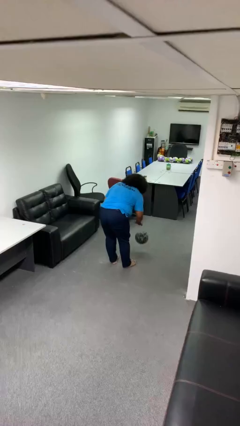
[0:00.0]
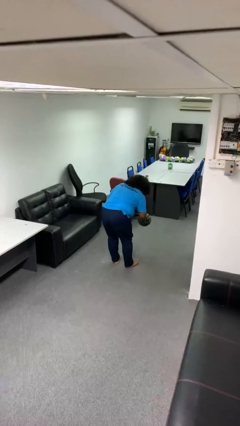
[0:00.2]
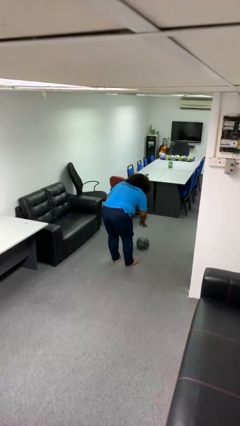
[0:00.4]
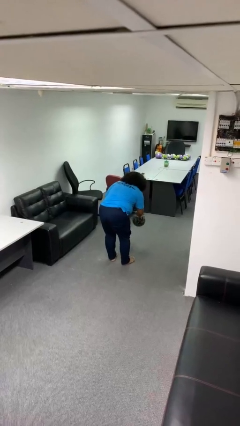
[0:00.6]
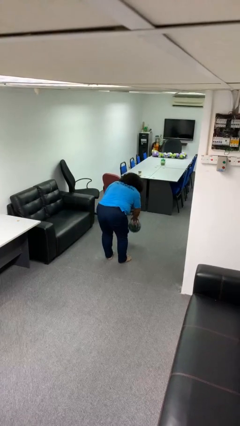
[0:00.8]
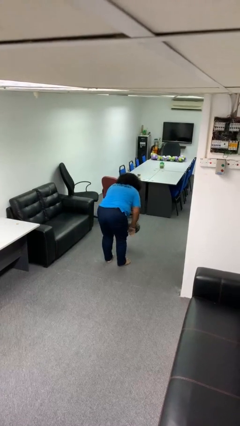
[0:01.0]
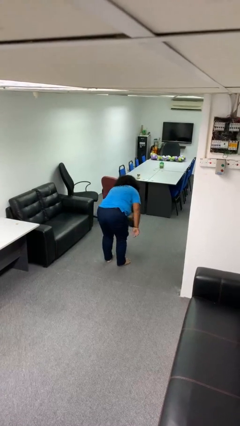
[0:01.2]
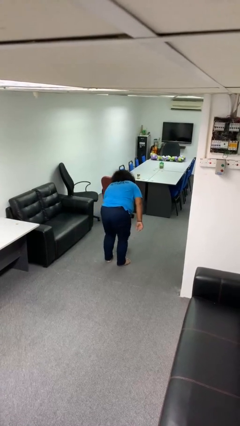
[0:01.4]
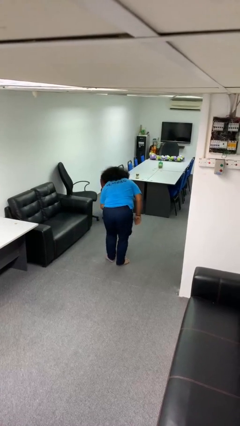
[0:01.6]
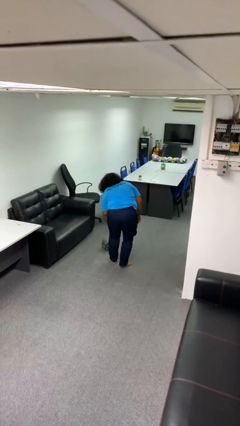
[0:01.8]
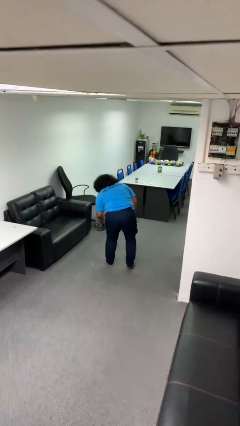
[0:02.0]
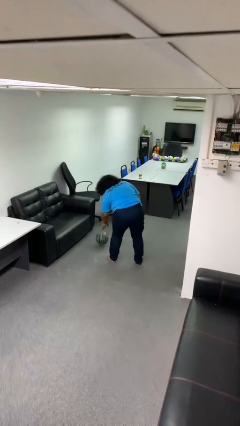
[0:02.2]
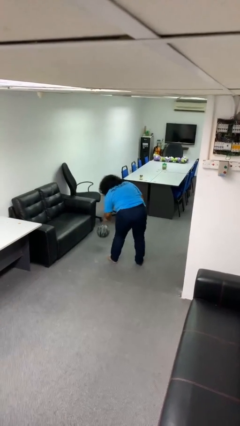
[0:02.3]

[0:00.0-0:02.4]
person bounces ball on floor

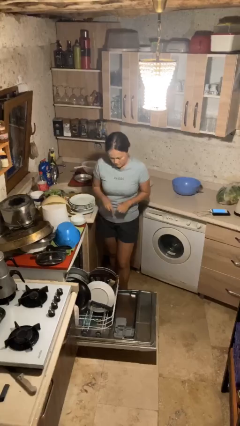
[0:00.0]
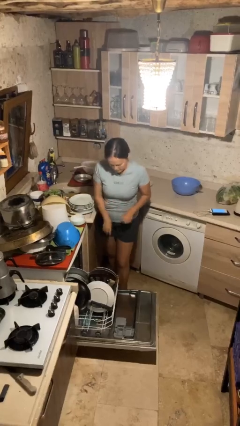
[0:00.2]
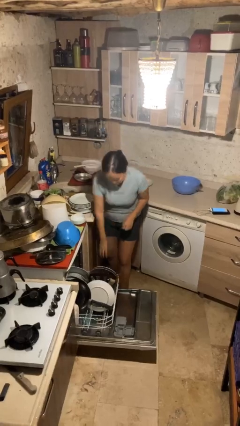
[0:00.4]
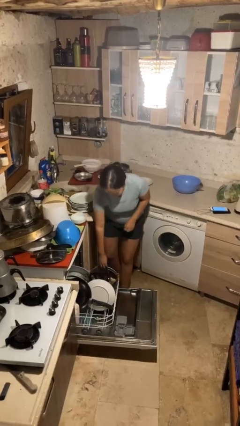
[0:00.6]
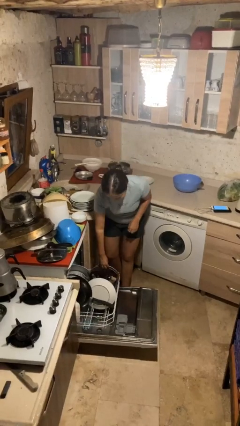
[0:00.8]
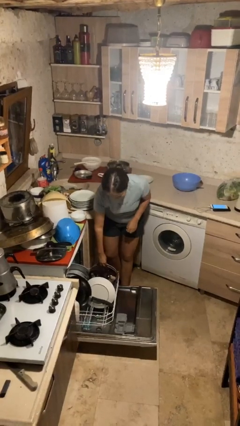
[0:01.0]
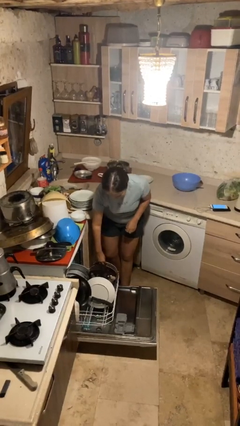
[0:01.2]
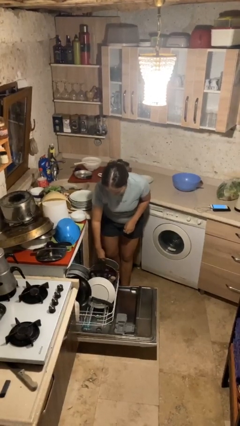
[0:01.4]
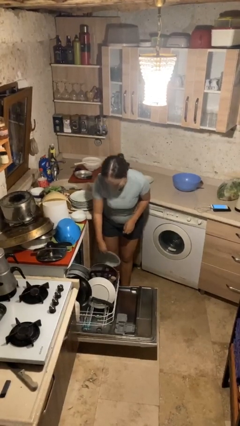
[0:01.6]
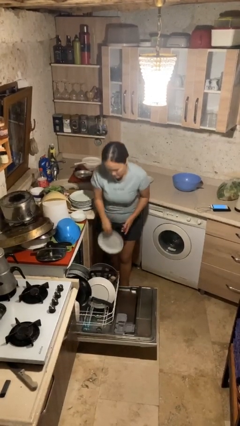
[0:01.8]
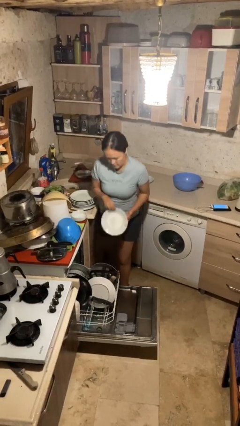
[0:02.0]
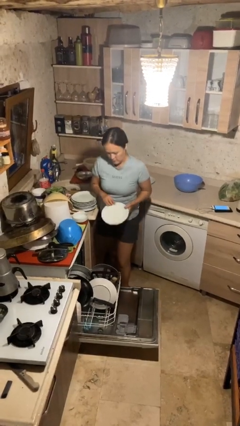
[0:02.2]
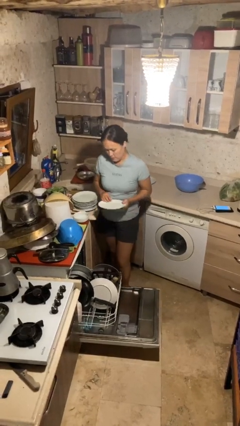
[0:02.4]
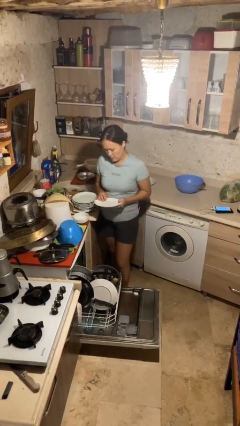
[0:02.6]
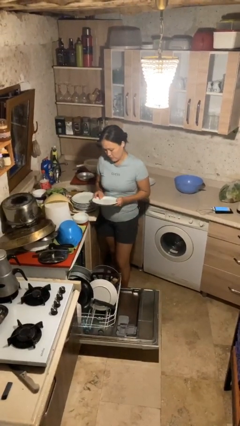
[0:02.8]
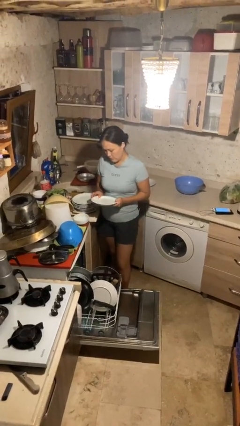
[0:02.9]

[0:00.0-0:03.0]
person unloads dishwasher

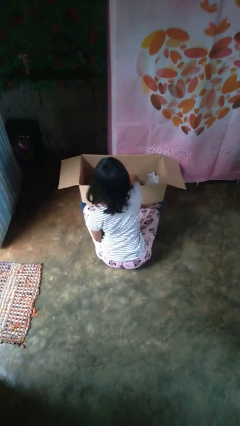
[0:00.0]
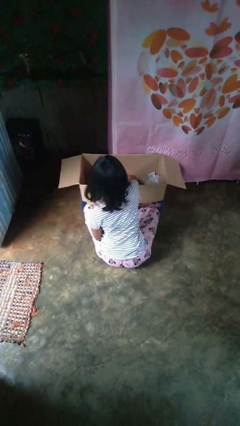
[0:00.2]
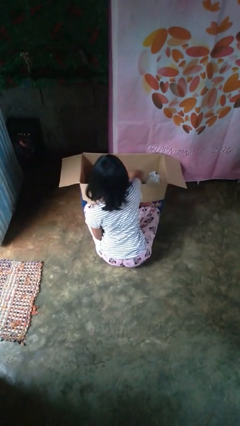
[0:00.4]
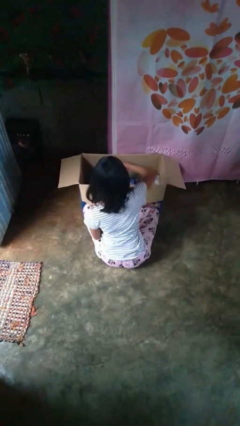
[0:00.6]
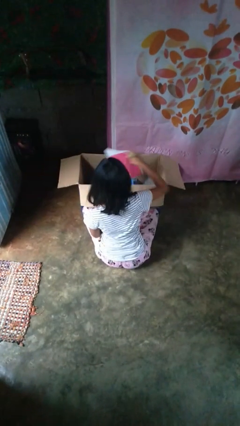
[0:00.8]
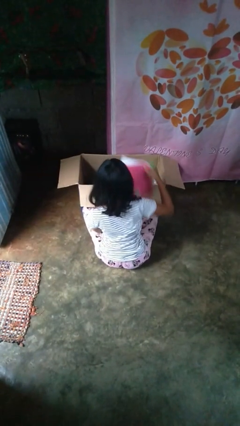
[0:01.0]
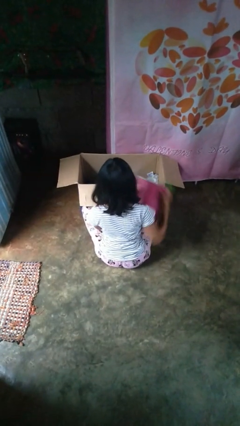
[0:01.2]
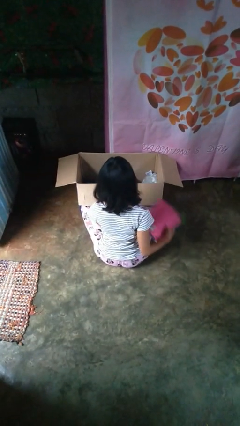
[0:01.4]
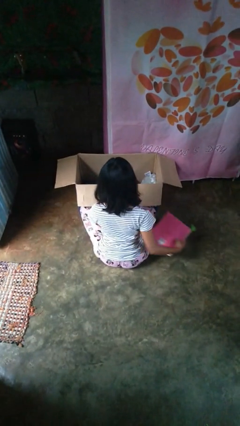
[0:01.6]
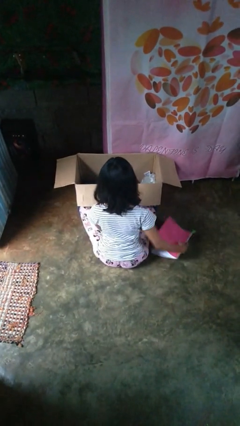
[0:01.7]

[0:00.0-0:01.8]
person takes object from box

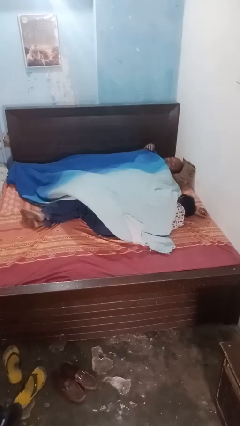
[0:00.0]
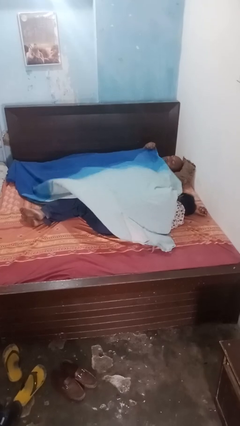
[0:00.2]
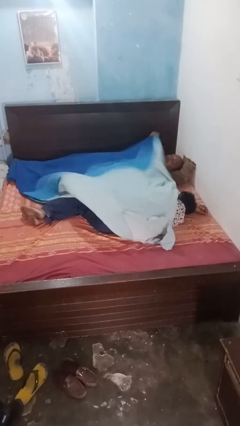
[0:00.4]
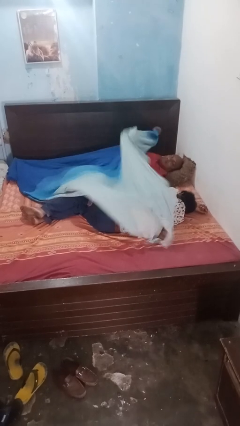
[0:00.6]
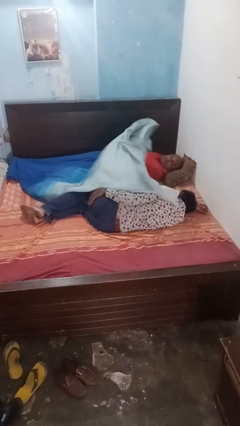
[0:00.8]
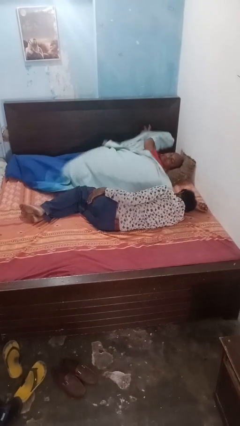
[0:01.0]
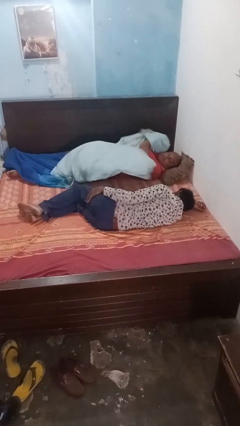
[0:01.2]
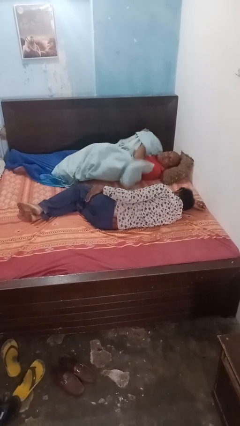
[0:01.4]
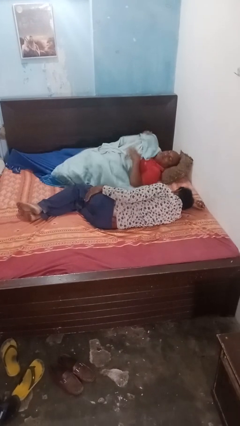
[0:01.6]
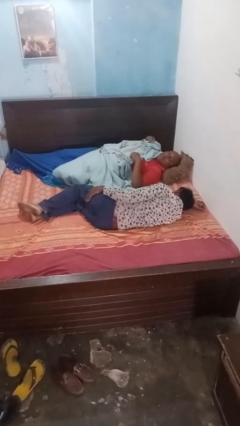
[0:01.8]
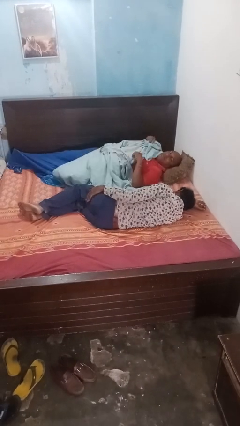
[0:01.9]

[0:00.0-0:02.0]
person uncovers friend with blanket

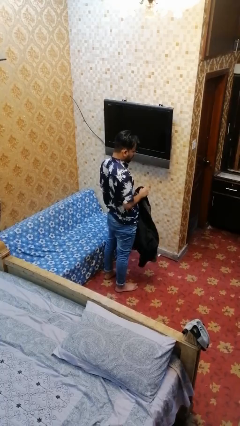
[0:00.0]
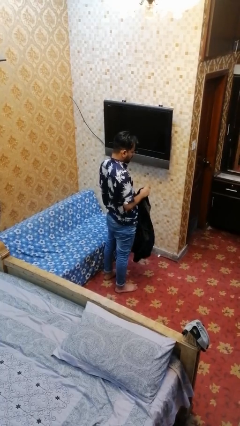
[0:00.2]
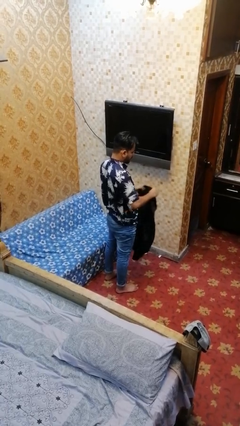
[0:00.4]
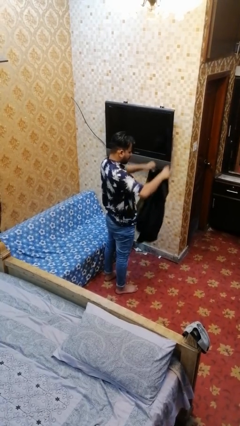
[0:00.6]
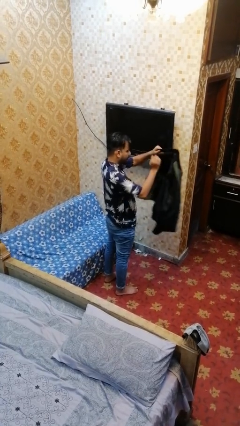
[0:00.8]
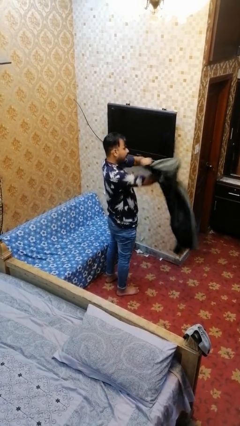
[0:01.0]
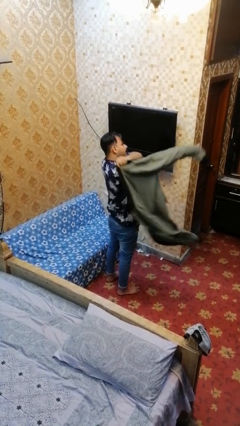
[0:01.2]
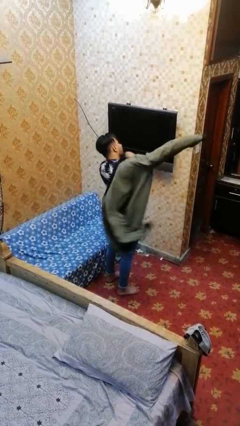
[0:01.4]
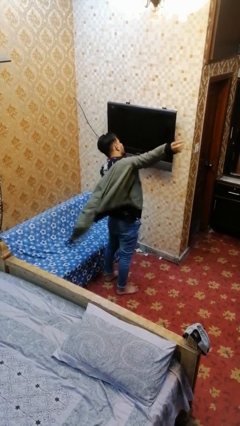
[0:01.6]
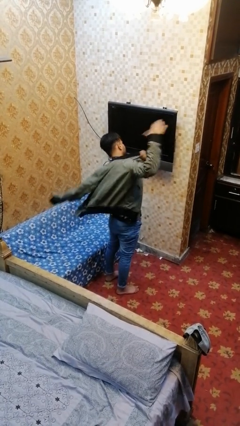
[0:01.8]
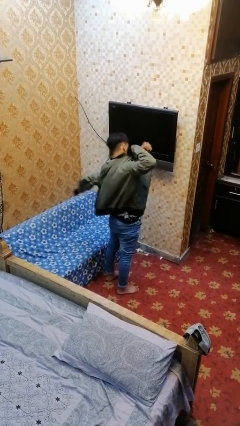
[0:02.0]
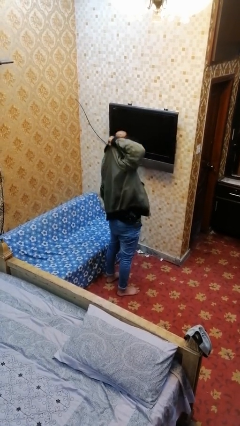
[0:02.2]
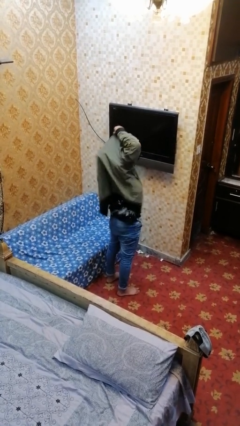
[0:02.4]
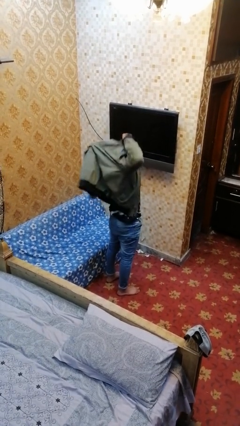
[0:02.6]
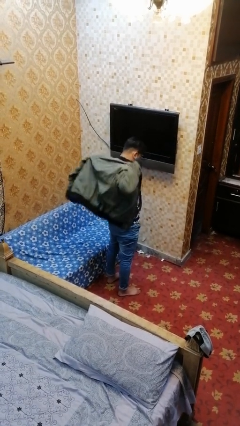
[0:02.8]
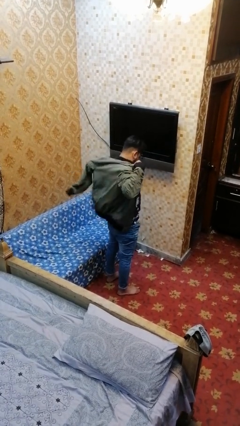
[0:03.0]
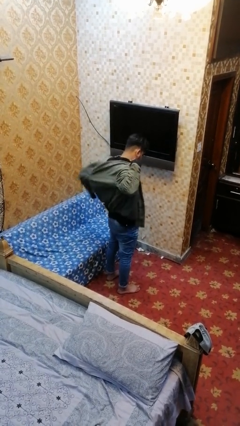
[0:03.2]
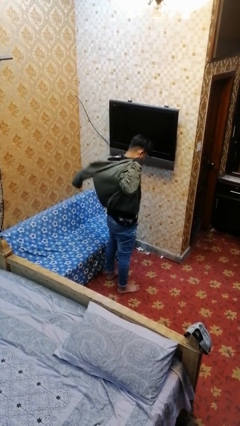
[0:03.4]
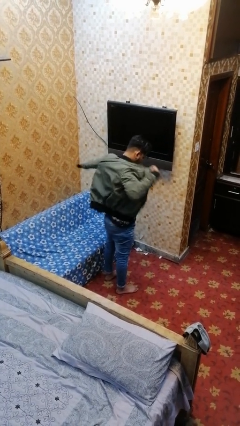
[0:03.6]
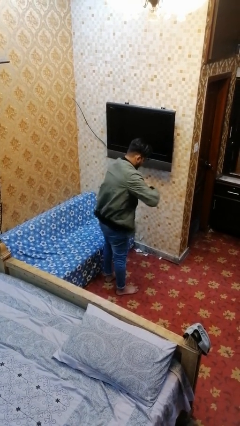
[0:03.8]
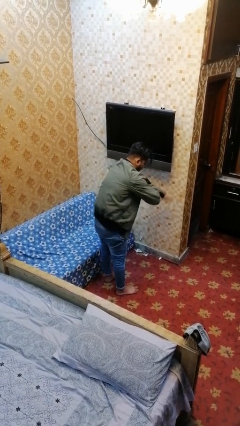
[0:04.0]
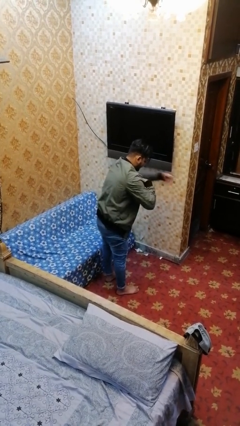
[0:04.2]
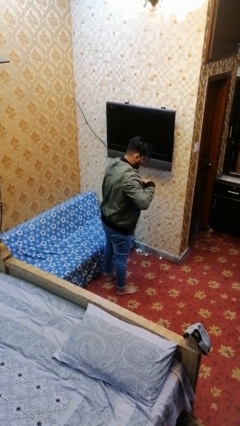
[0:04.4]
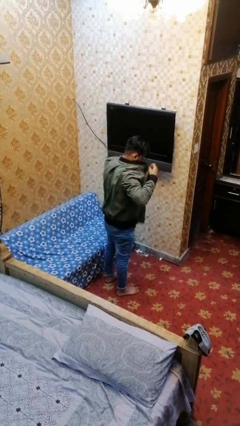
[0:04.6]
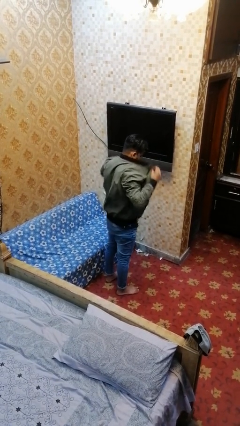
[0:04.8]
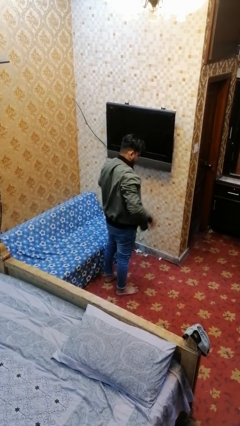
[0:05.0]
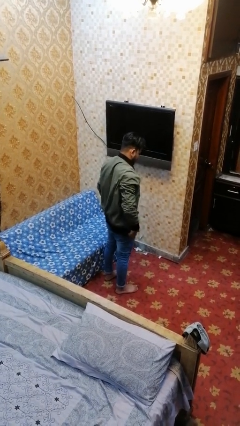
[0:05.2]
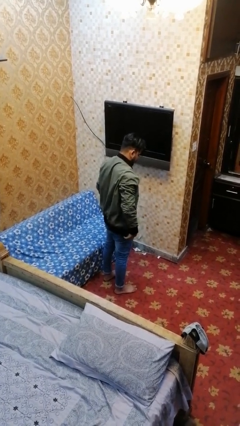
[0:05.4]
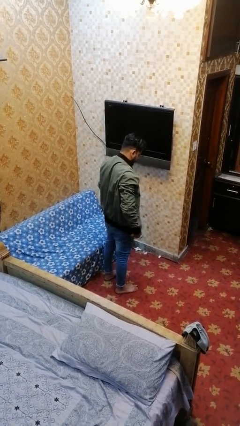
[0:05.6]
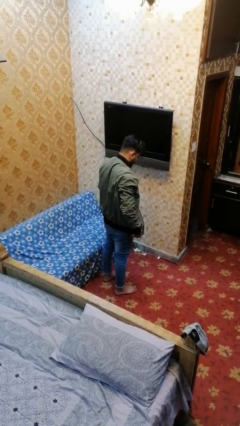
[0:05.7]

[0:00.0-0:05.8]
person puts on jacket

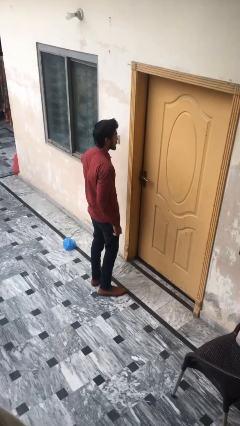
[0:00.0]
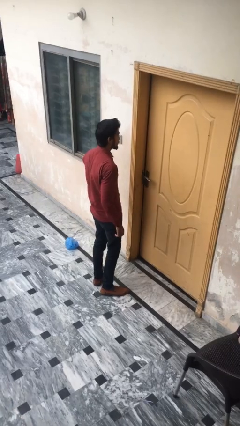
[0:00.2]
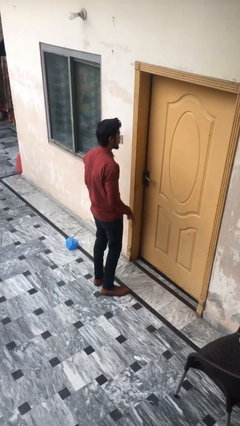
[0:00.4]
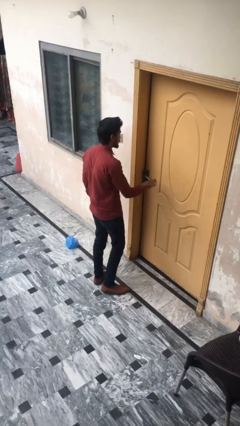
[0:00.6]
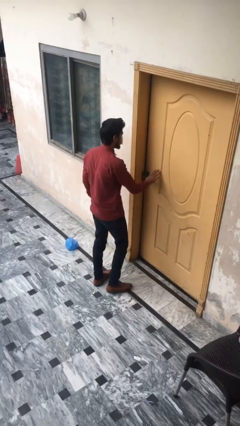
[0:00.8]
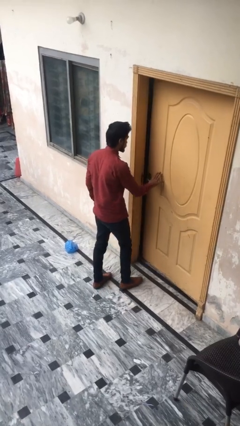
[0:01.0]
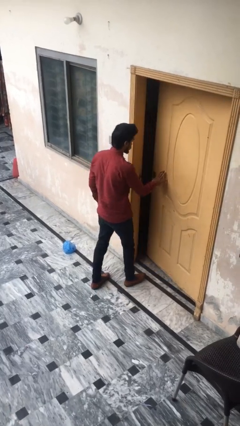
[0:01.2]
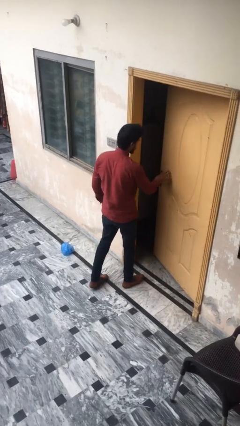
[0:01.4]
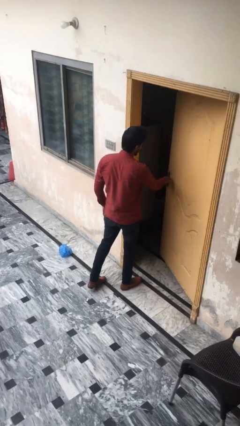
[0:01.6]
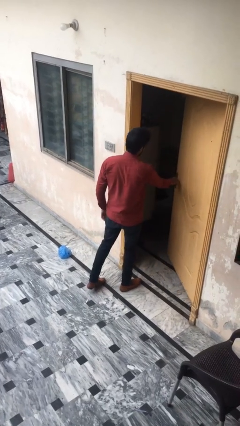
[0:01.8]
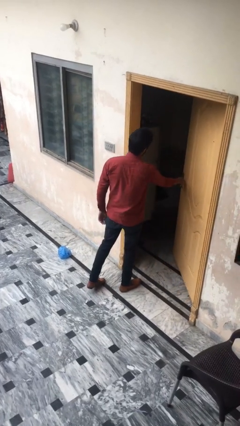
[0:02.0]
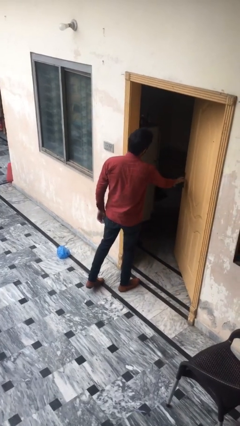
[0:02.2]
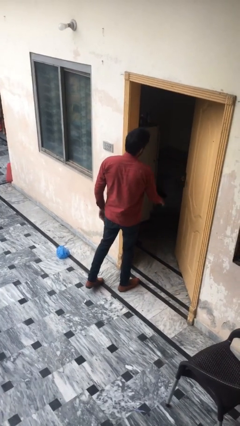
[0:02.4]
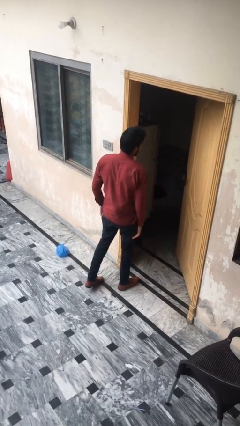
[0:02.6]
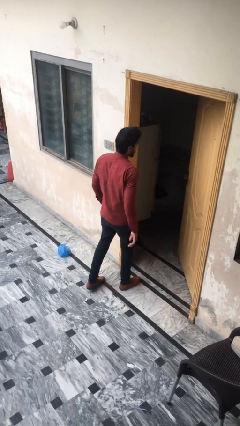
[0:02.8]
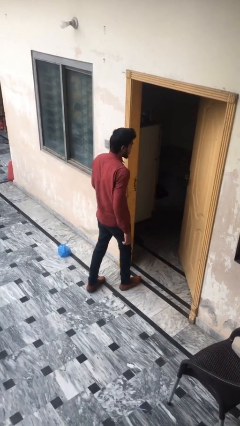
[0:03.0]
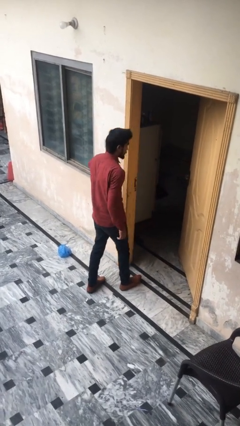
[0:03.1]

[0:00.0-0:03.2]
person opens facility door
